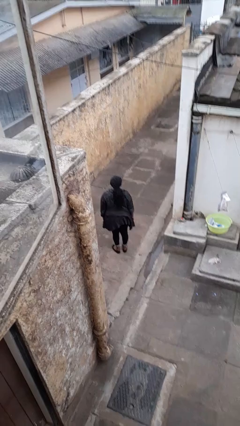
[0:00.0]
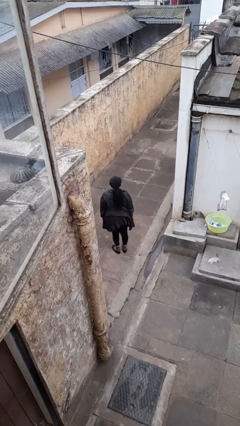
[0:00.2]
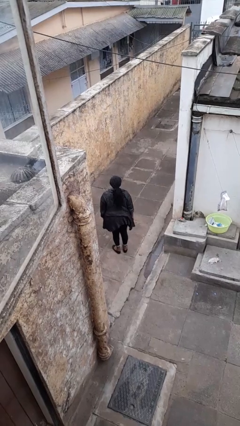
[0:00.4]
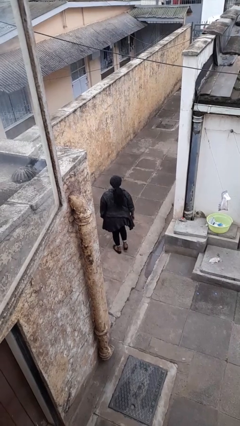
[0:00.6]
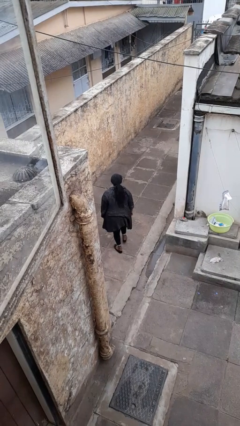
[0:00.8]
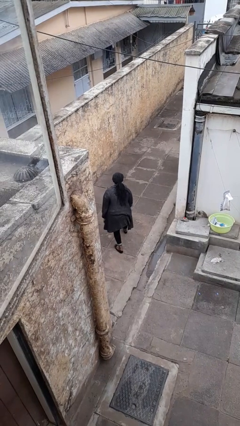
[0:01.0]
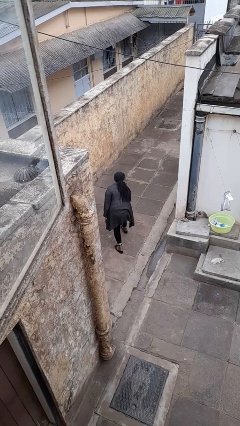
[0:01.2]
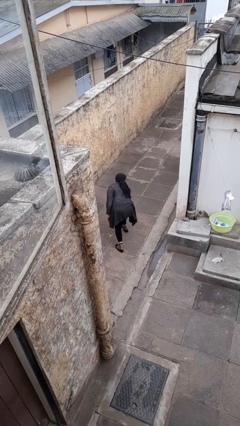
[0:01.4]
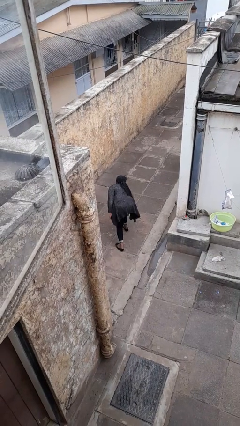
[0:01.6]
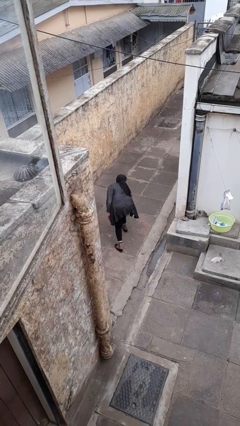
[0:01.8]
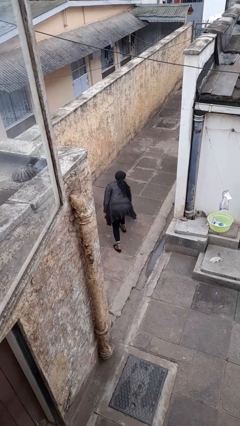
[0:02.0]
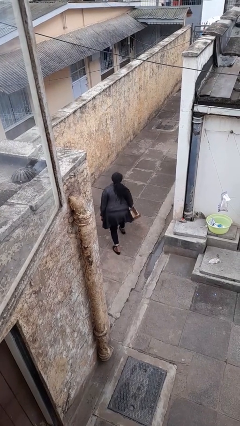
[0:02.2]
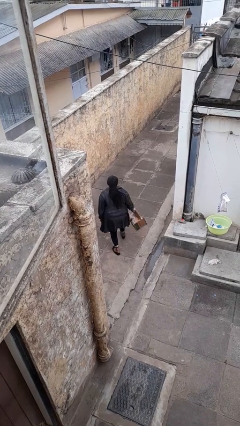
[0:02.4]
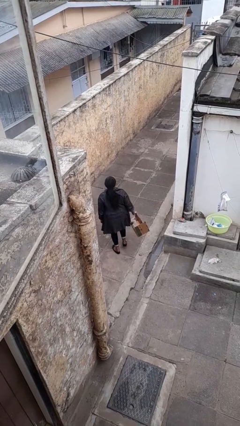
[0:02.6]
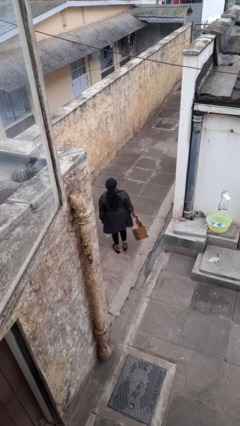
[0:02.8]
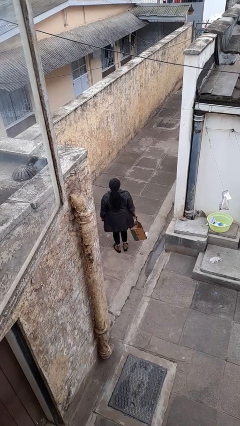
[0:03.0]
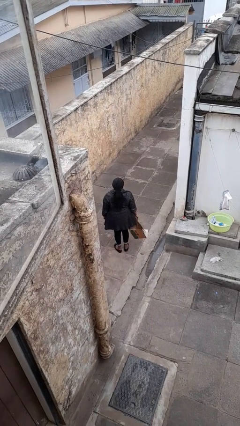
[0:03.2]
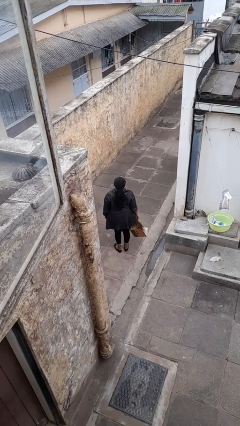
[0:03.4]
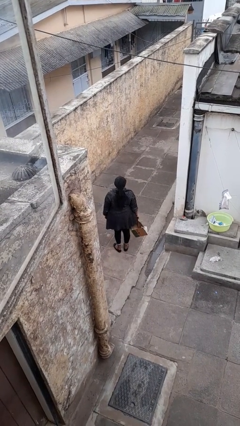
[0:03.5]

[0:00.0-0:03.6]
person picks up object from floor

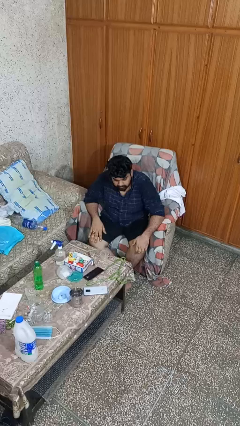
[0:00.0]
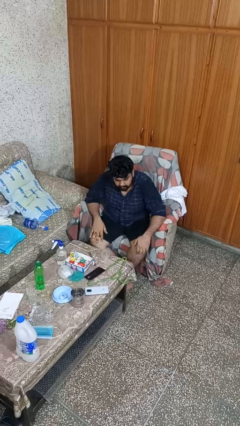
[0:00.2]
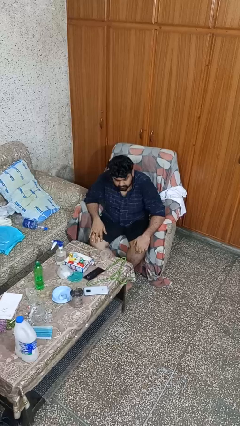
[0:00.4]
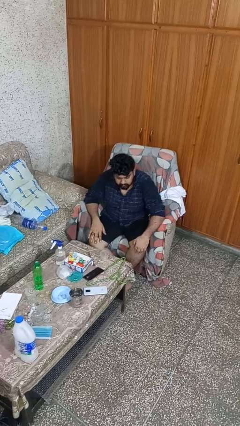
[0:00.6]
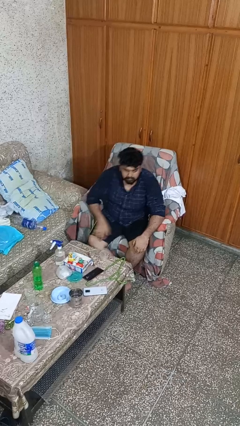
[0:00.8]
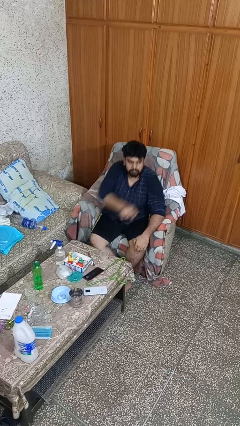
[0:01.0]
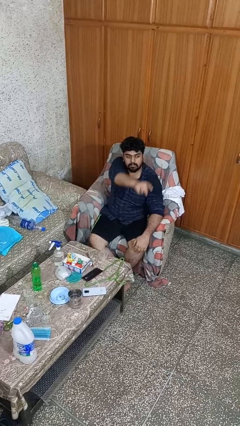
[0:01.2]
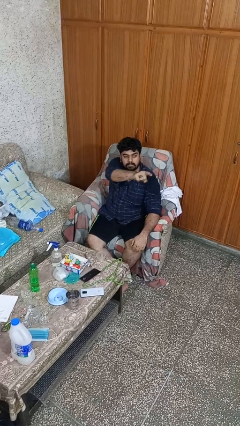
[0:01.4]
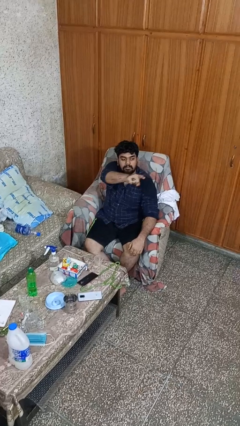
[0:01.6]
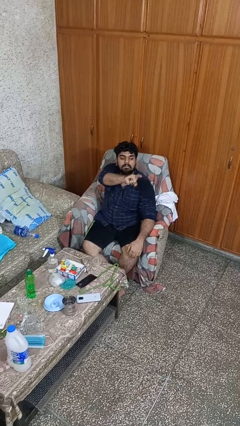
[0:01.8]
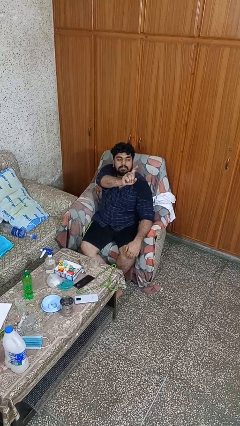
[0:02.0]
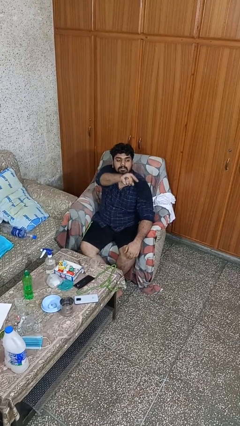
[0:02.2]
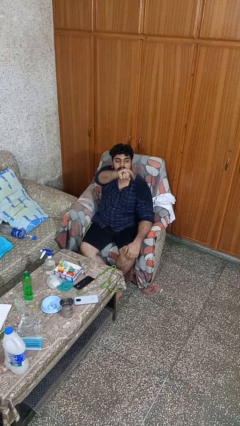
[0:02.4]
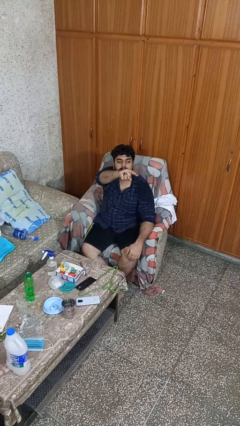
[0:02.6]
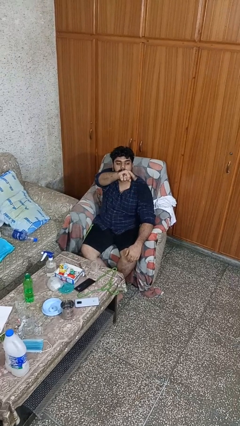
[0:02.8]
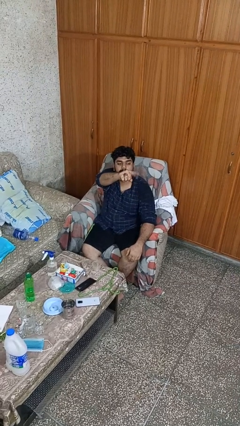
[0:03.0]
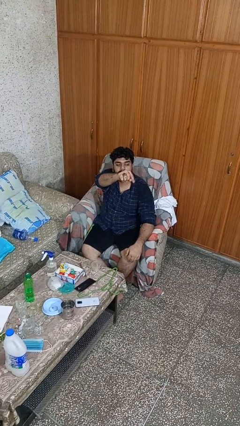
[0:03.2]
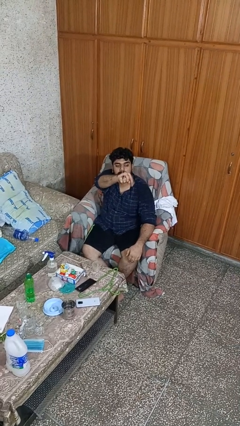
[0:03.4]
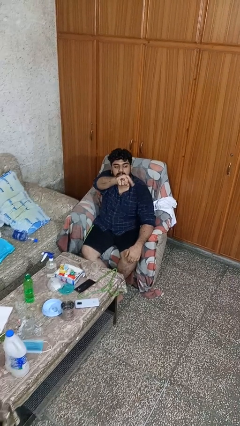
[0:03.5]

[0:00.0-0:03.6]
person points at person

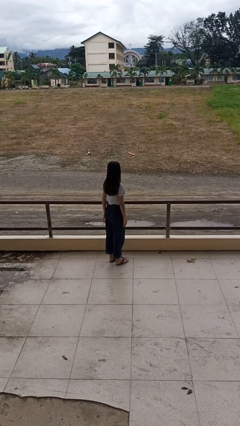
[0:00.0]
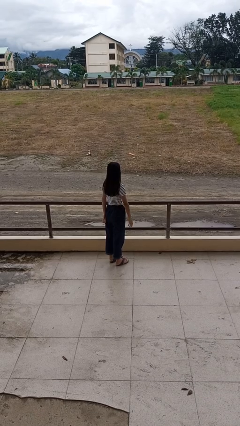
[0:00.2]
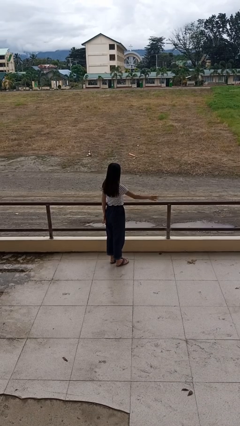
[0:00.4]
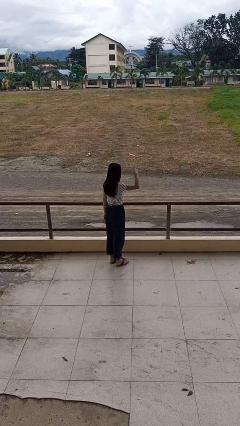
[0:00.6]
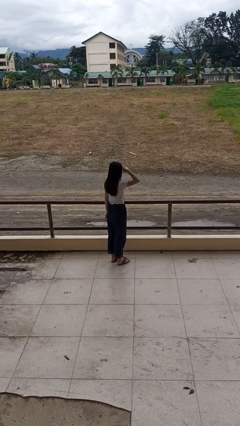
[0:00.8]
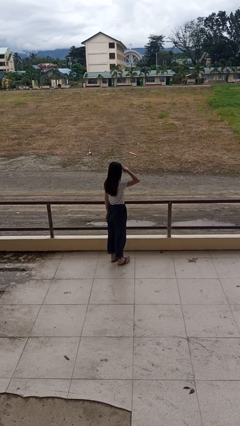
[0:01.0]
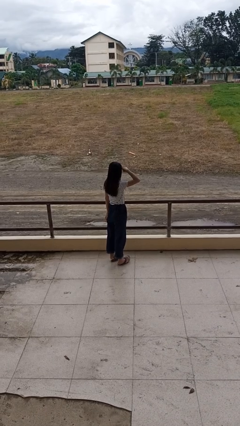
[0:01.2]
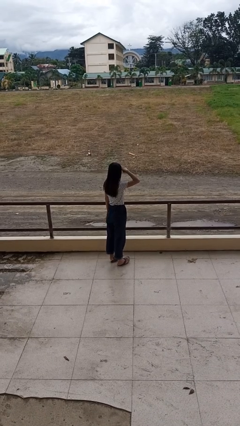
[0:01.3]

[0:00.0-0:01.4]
person salutes

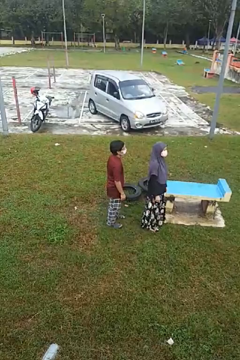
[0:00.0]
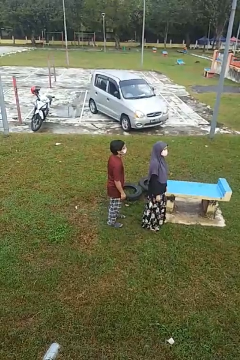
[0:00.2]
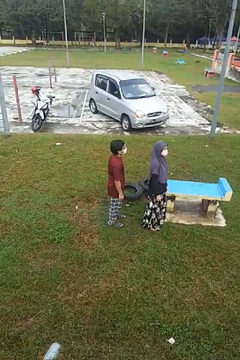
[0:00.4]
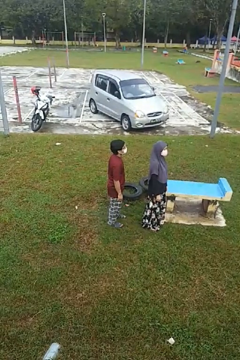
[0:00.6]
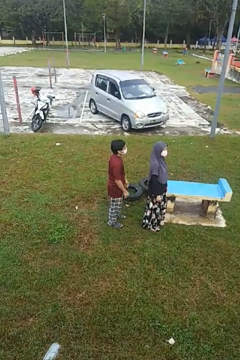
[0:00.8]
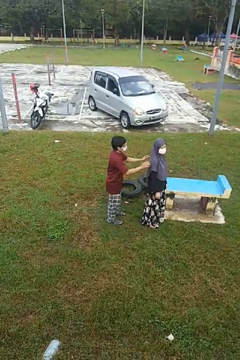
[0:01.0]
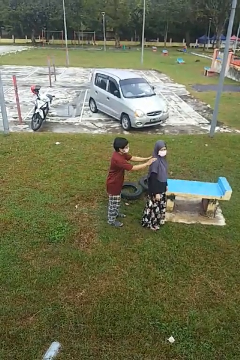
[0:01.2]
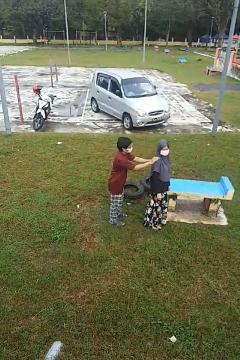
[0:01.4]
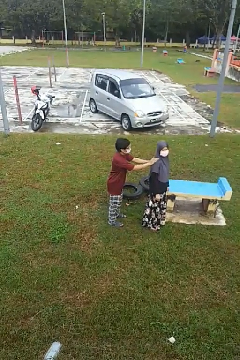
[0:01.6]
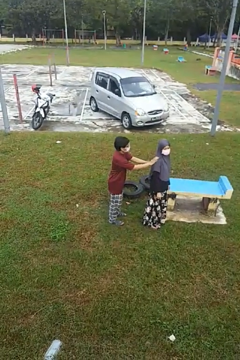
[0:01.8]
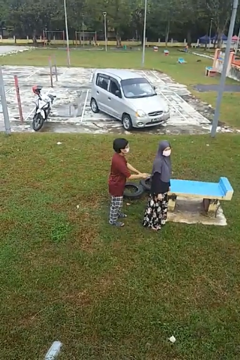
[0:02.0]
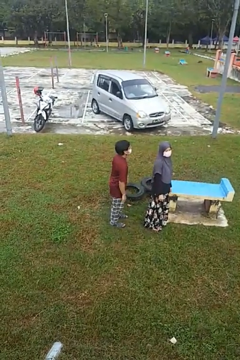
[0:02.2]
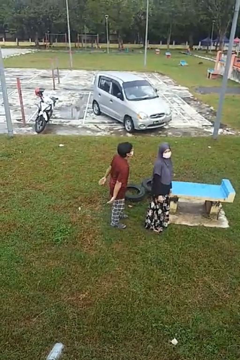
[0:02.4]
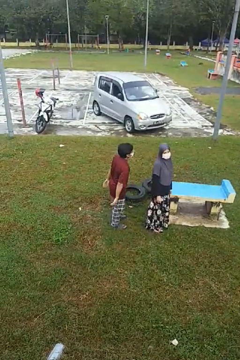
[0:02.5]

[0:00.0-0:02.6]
person touches back of person

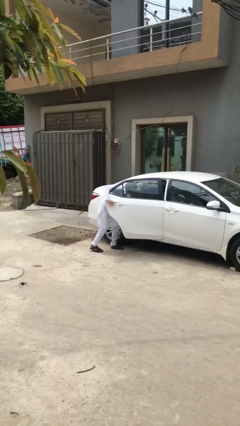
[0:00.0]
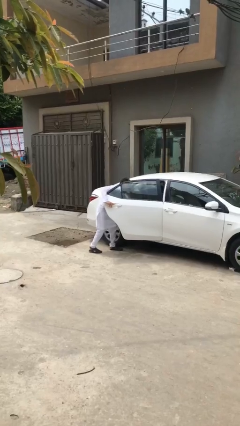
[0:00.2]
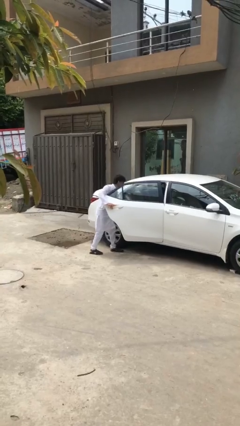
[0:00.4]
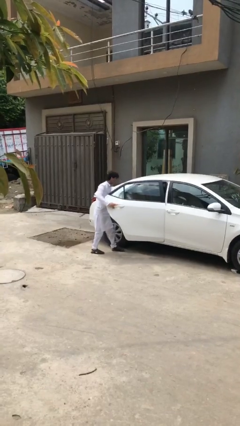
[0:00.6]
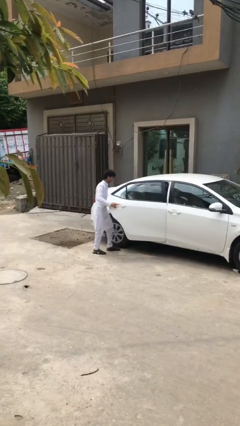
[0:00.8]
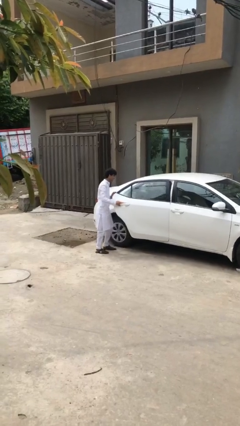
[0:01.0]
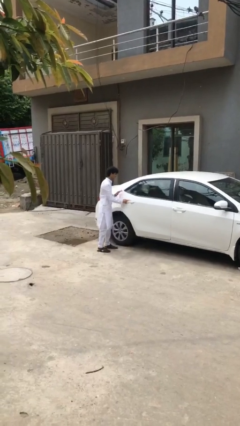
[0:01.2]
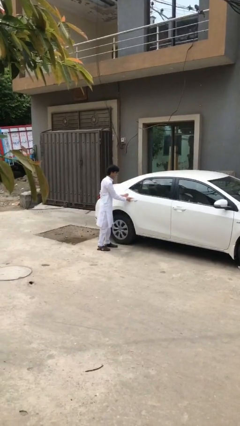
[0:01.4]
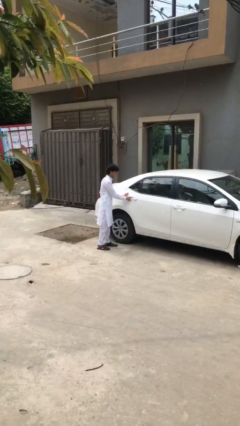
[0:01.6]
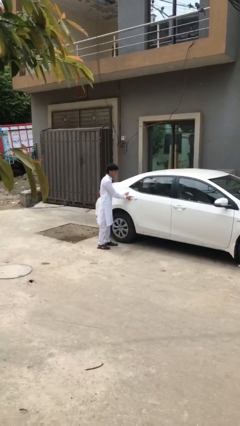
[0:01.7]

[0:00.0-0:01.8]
person closes car door

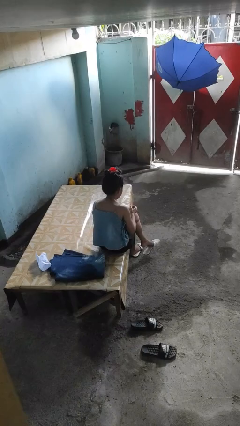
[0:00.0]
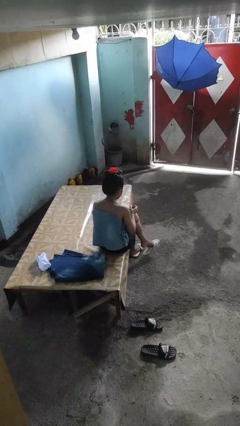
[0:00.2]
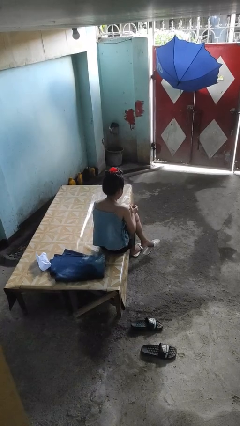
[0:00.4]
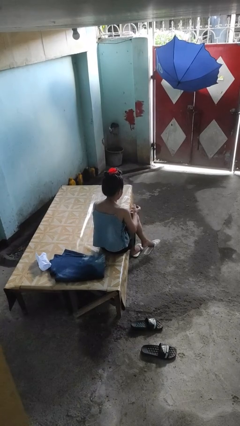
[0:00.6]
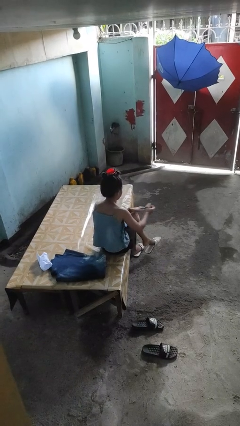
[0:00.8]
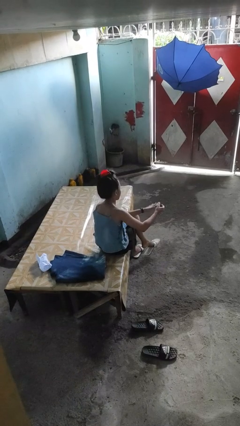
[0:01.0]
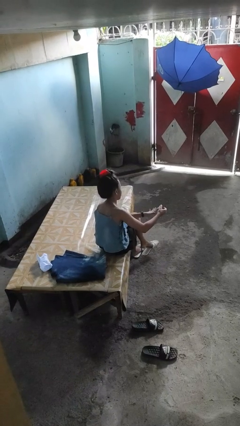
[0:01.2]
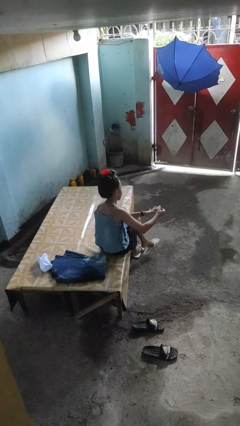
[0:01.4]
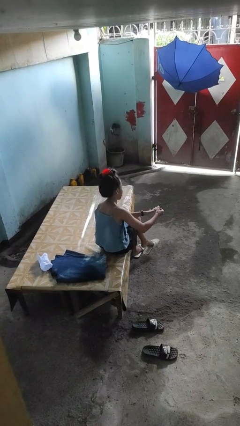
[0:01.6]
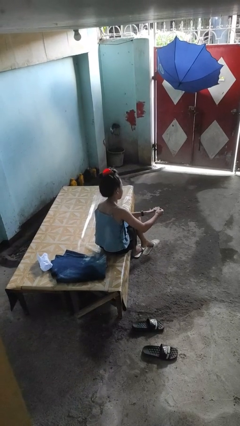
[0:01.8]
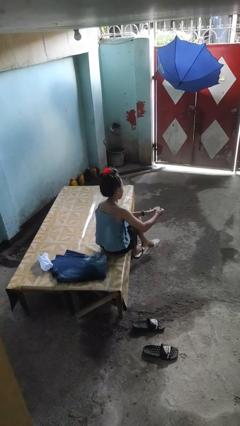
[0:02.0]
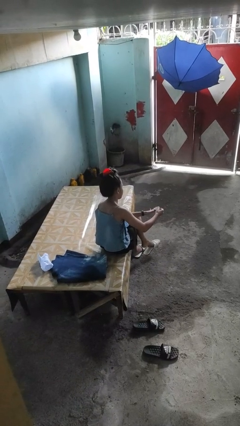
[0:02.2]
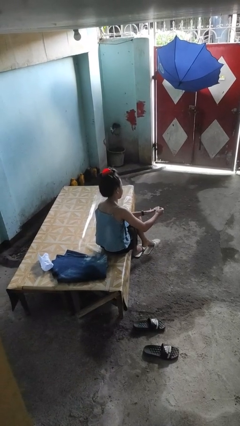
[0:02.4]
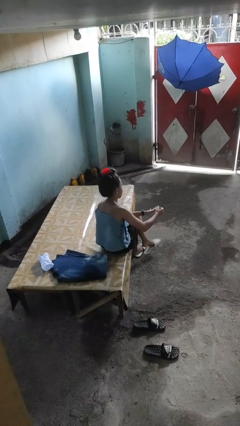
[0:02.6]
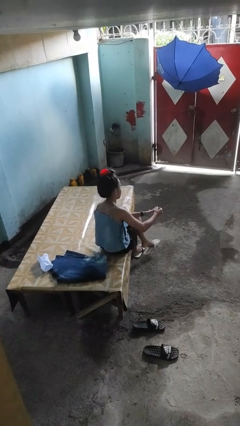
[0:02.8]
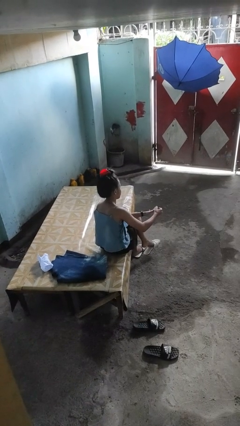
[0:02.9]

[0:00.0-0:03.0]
person clips fingernails

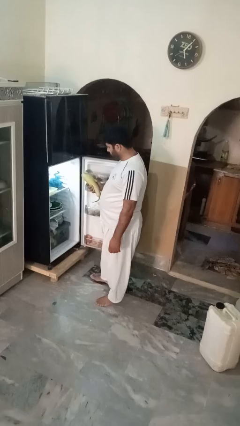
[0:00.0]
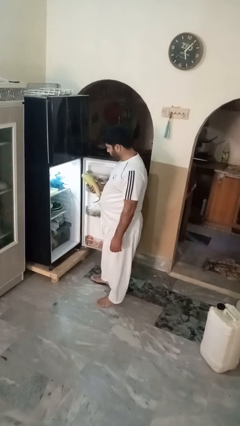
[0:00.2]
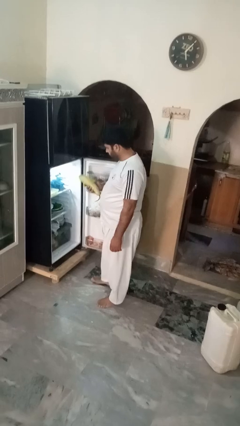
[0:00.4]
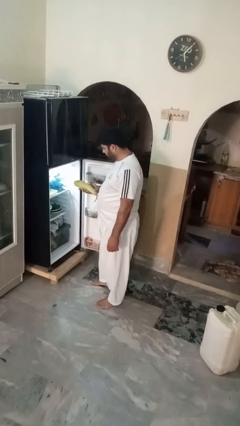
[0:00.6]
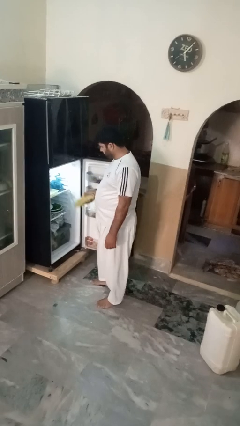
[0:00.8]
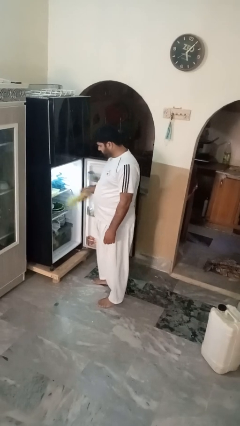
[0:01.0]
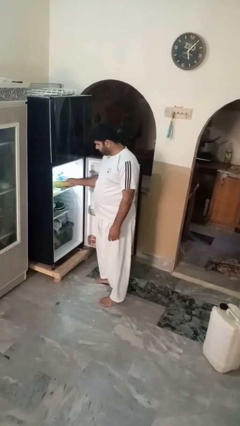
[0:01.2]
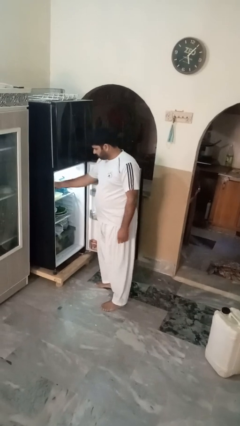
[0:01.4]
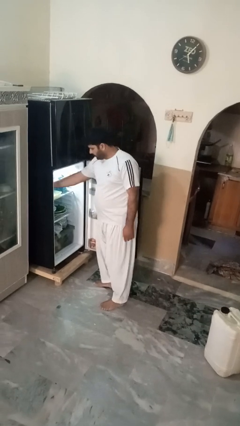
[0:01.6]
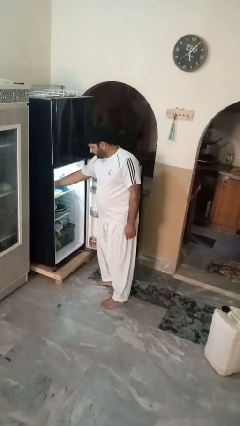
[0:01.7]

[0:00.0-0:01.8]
person puts object into refrigerator
